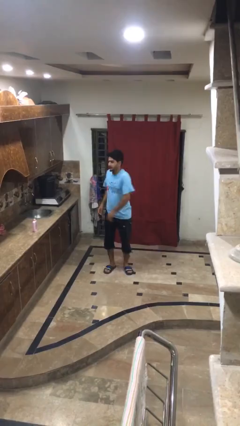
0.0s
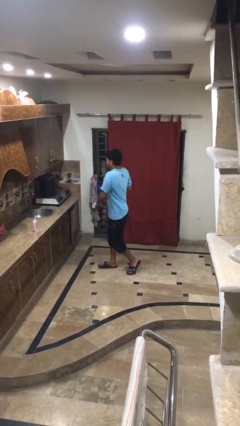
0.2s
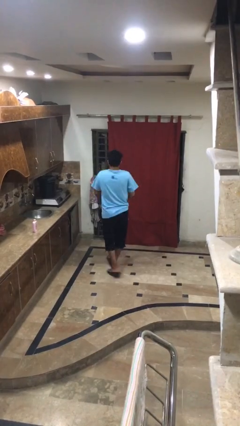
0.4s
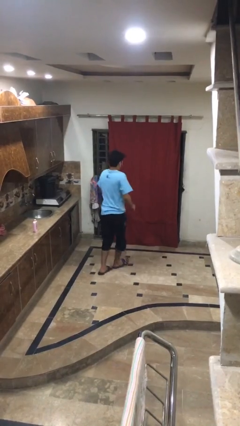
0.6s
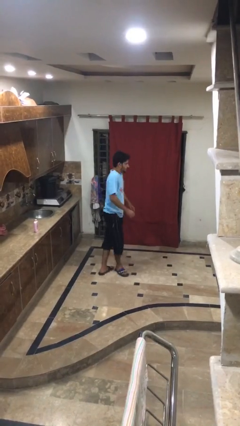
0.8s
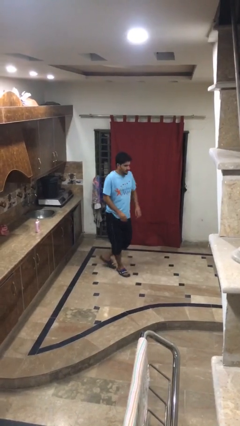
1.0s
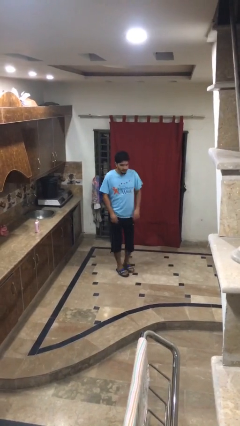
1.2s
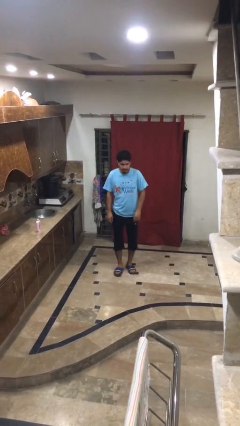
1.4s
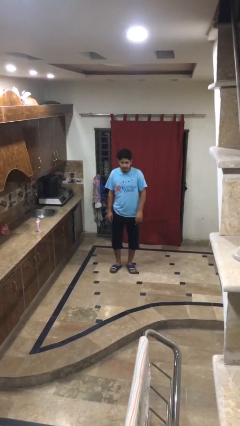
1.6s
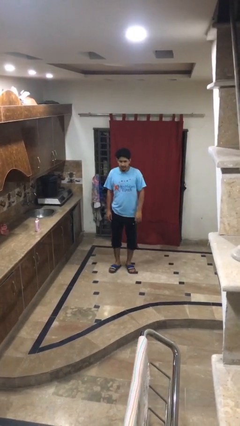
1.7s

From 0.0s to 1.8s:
person twirls

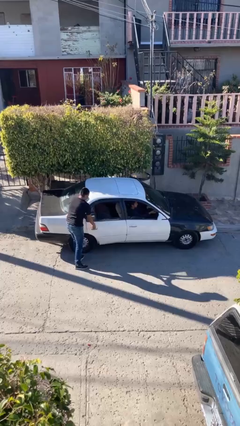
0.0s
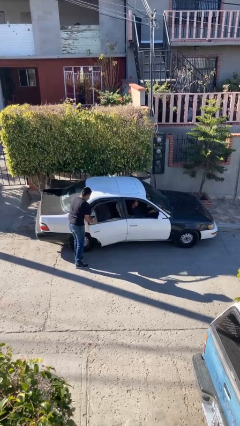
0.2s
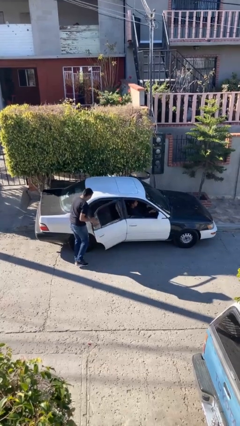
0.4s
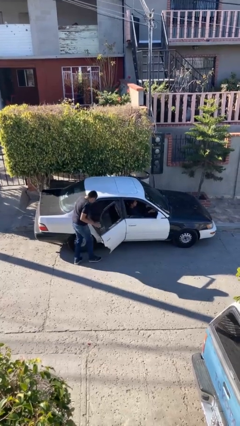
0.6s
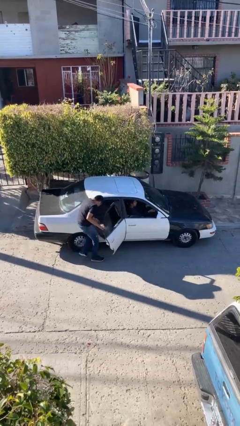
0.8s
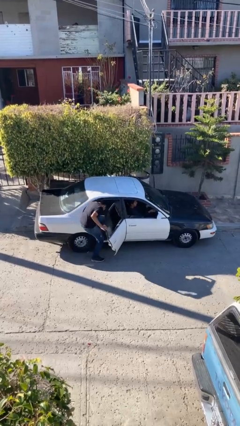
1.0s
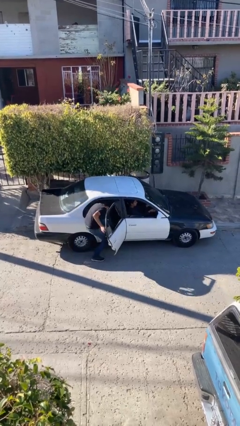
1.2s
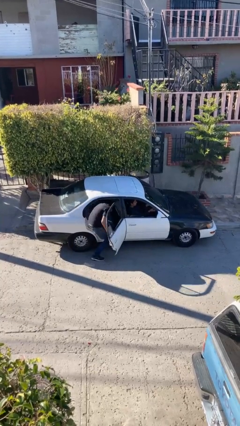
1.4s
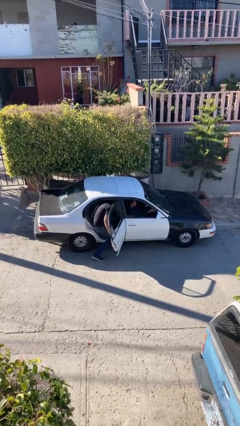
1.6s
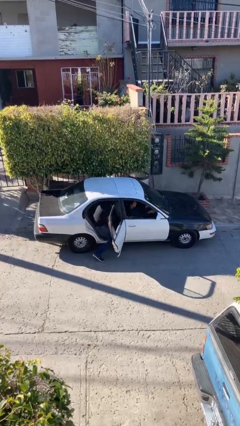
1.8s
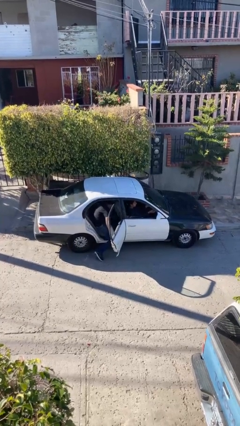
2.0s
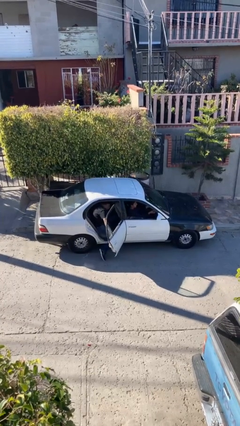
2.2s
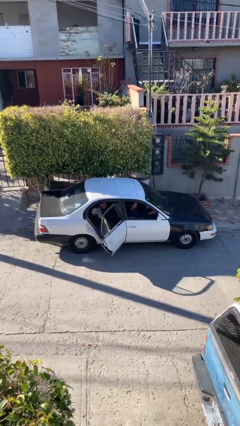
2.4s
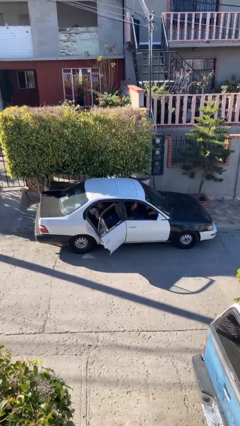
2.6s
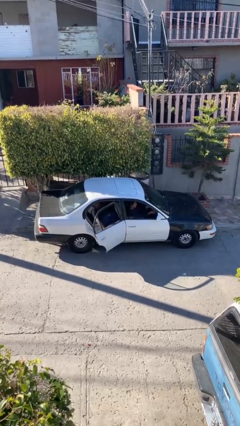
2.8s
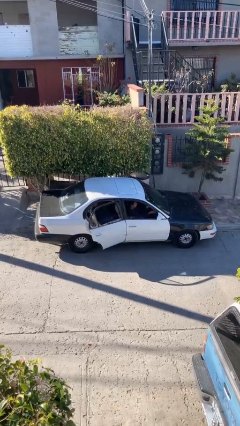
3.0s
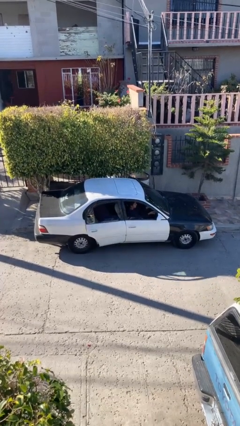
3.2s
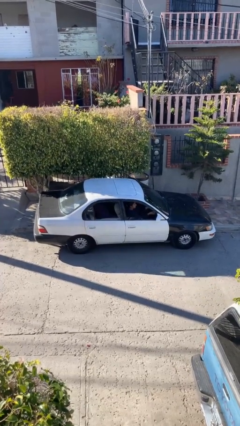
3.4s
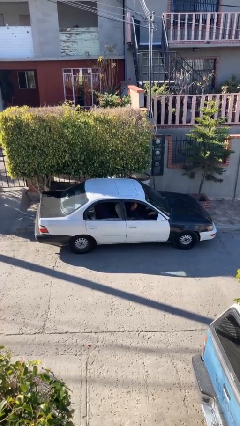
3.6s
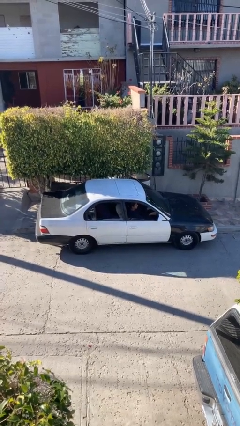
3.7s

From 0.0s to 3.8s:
car picks up person

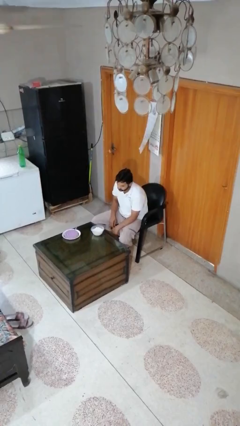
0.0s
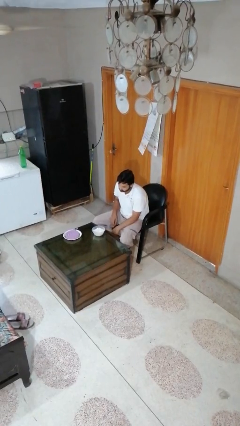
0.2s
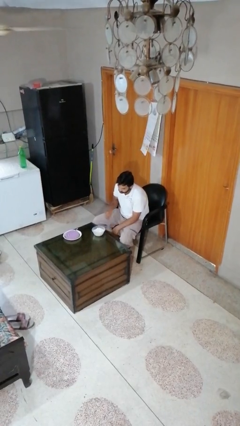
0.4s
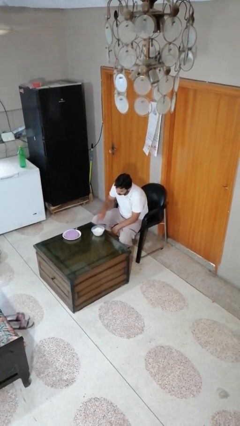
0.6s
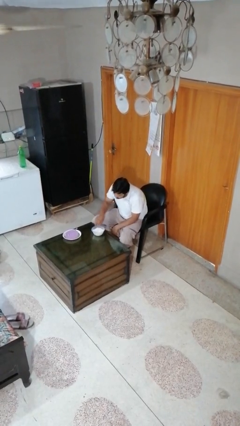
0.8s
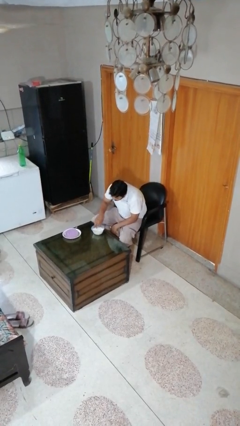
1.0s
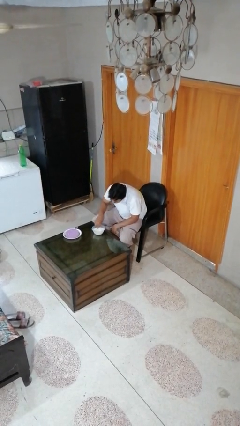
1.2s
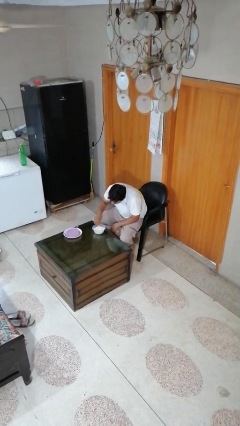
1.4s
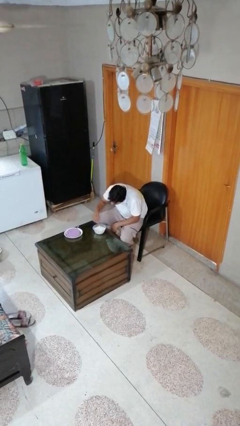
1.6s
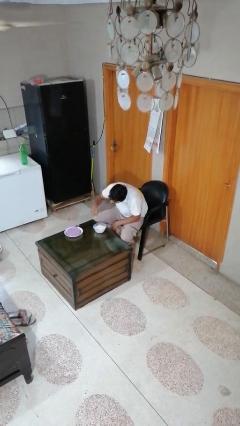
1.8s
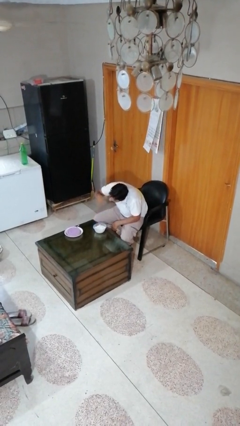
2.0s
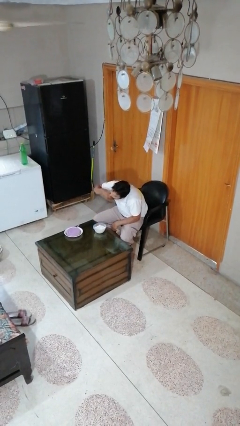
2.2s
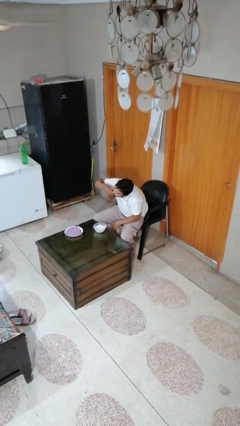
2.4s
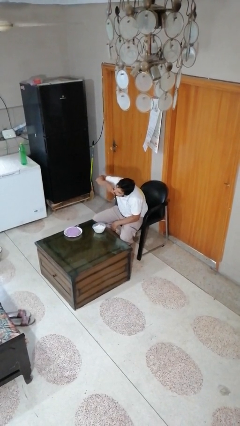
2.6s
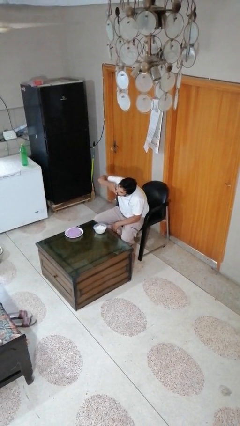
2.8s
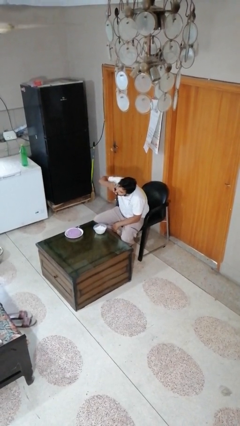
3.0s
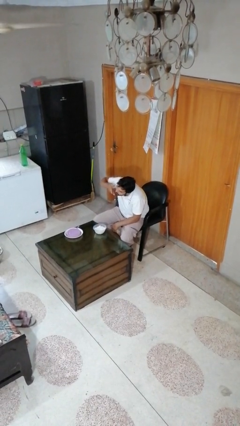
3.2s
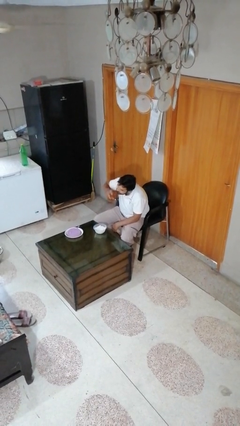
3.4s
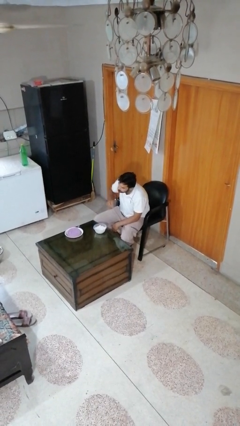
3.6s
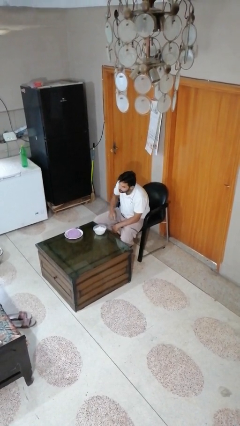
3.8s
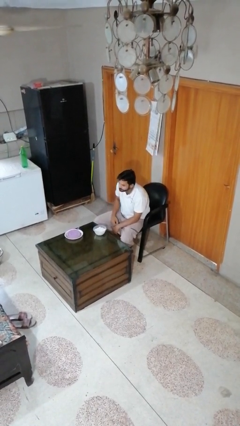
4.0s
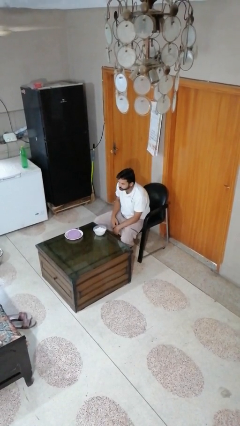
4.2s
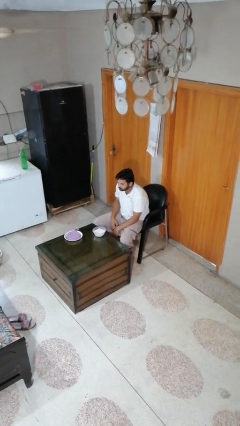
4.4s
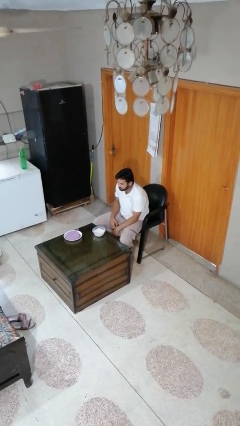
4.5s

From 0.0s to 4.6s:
person eats with hands

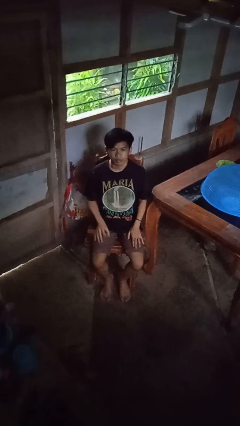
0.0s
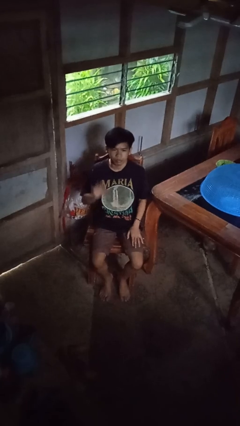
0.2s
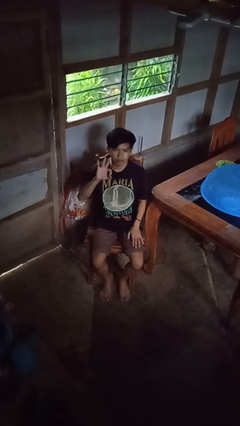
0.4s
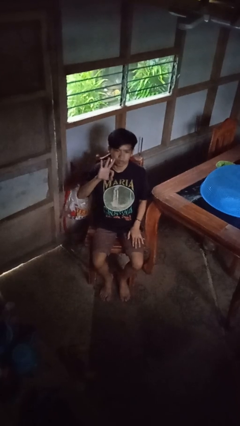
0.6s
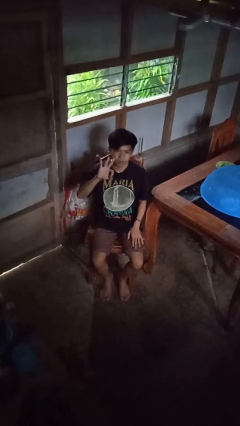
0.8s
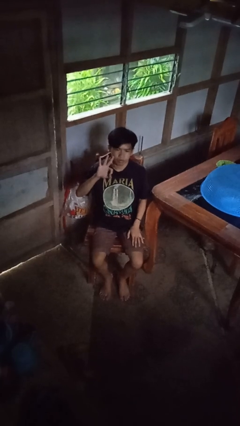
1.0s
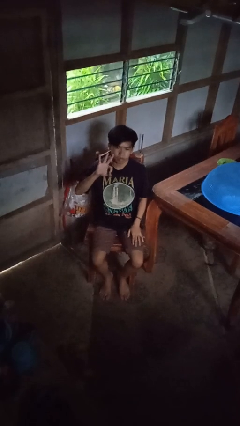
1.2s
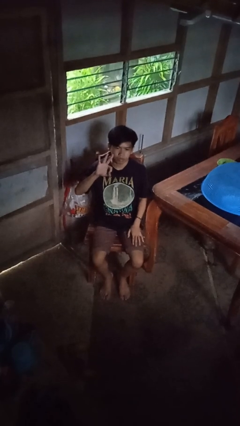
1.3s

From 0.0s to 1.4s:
person gestures number three

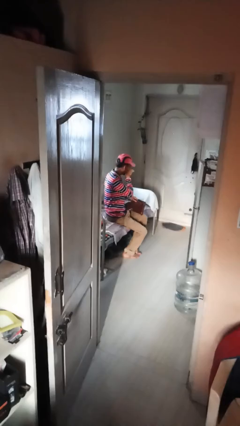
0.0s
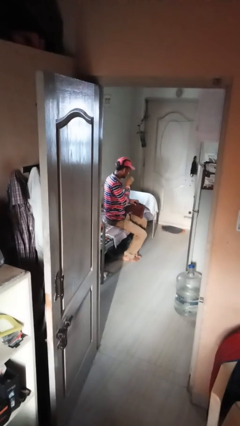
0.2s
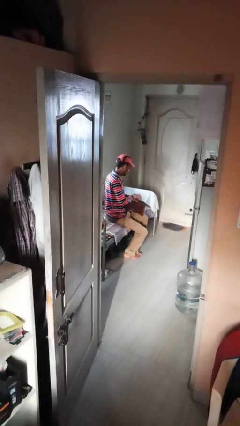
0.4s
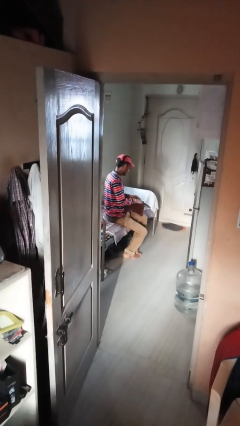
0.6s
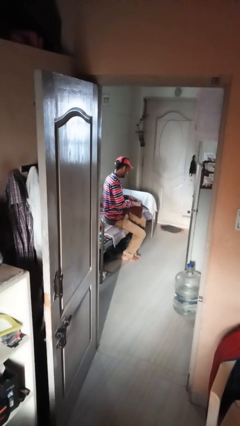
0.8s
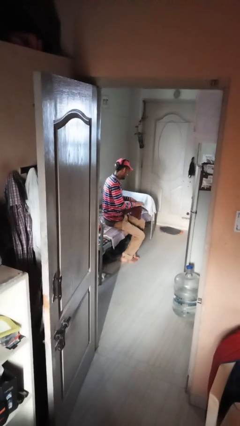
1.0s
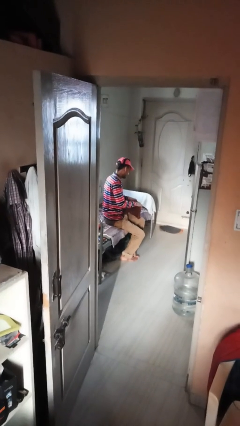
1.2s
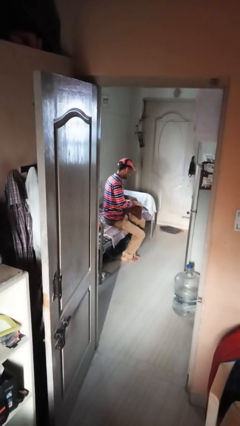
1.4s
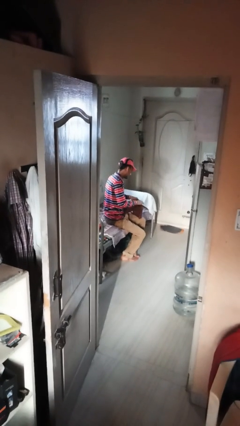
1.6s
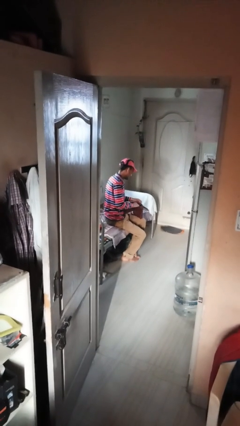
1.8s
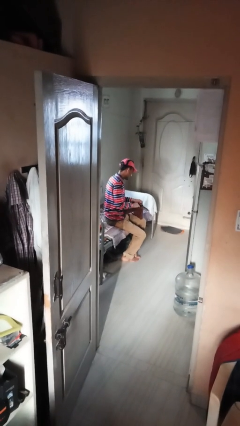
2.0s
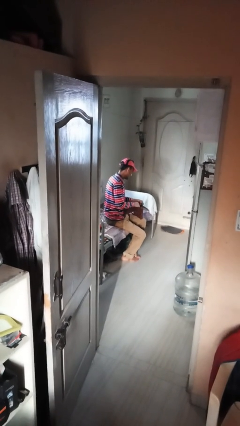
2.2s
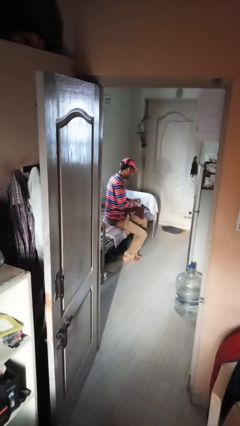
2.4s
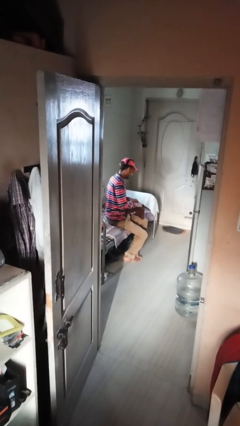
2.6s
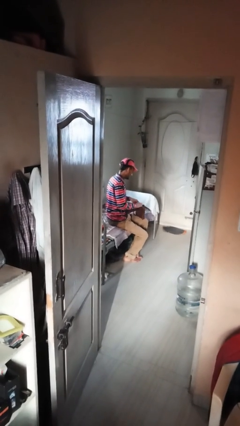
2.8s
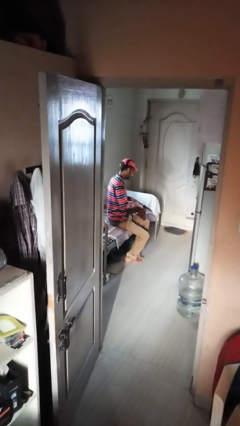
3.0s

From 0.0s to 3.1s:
person searches in purse

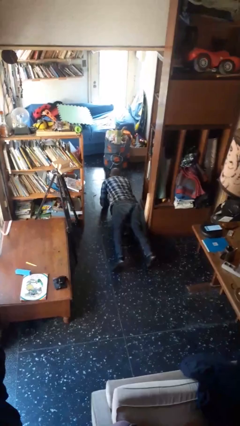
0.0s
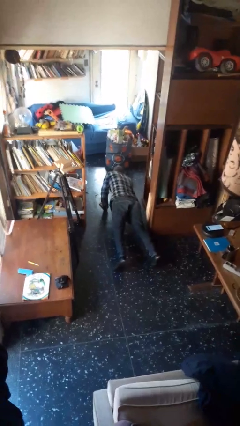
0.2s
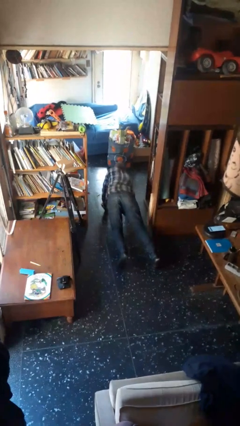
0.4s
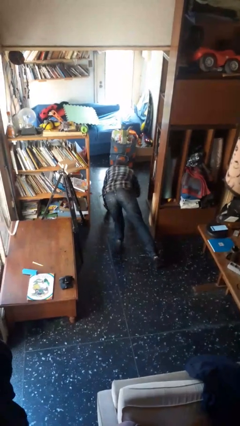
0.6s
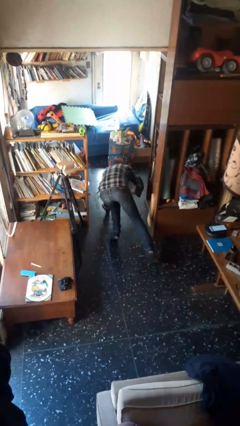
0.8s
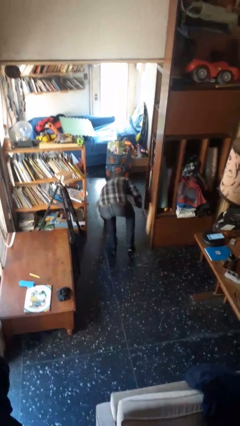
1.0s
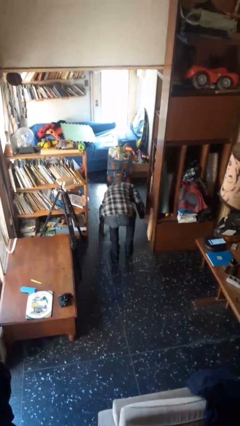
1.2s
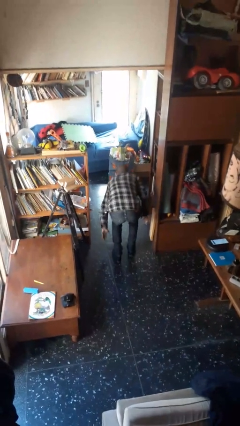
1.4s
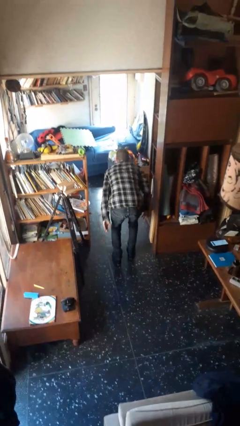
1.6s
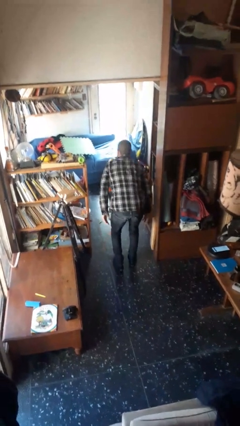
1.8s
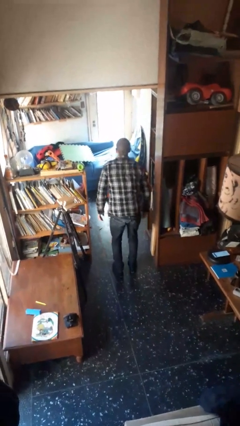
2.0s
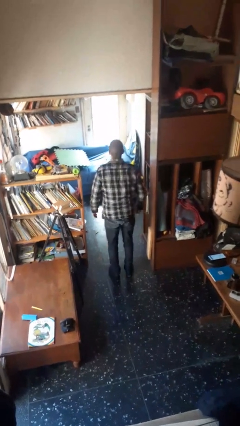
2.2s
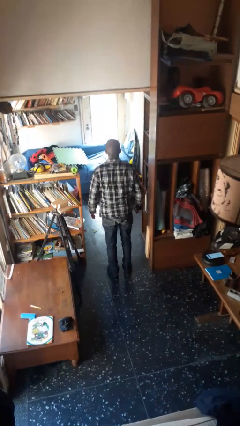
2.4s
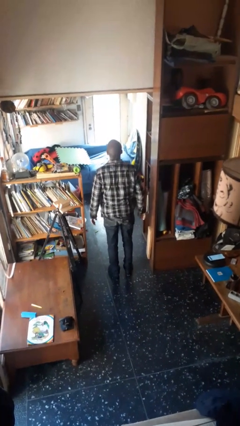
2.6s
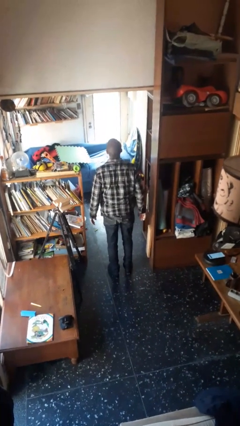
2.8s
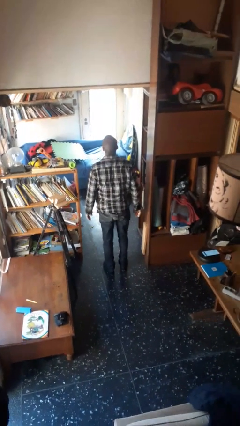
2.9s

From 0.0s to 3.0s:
person stands up from floor
